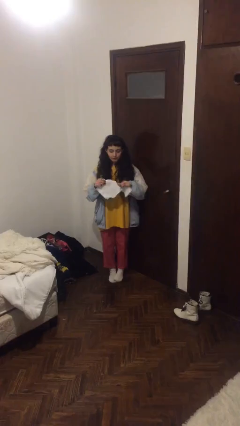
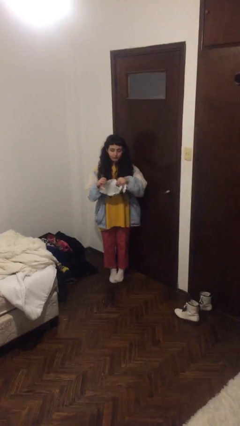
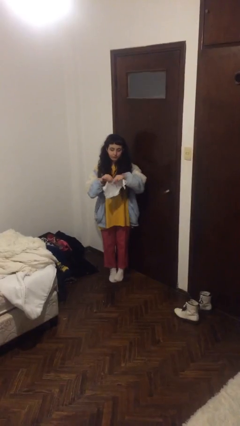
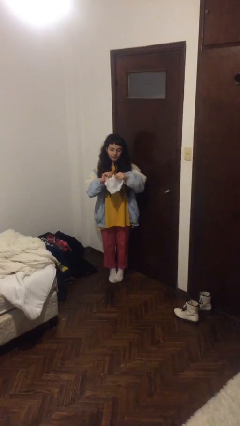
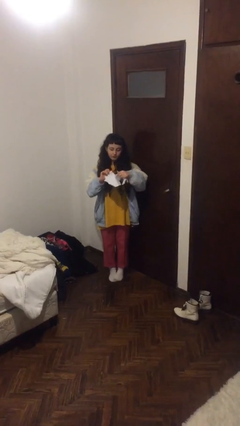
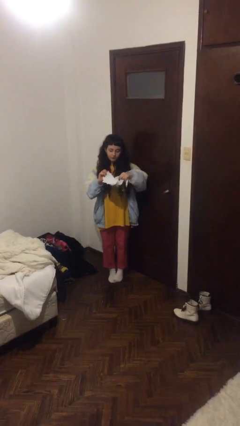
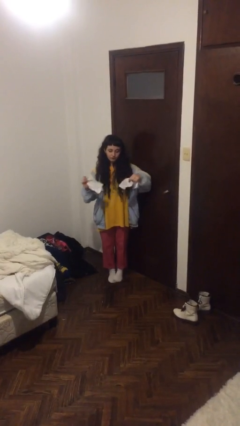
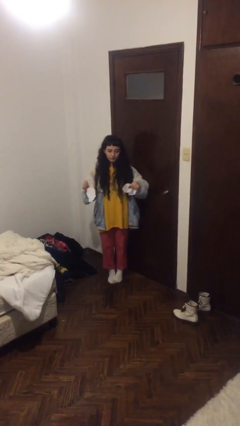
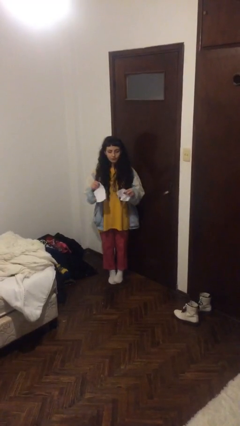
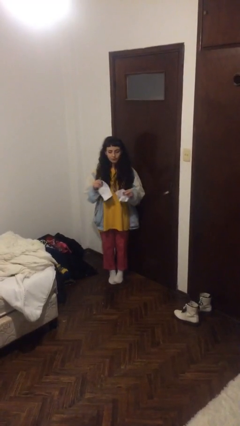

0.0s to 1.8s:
person tears paper

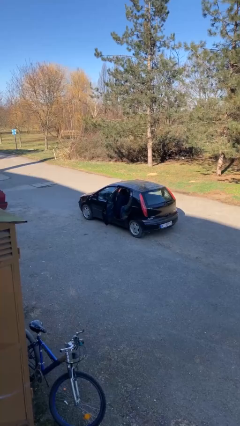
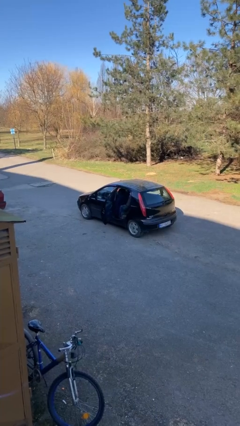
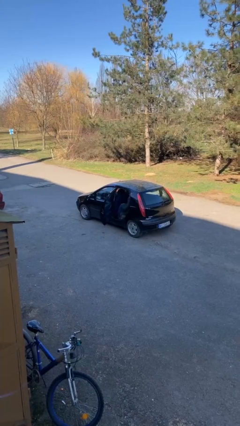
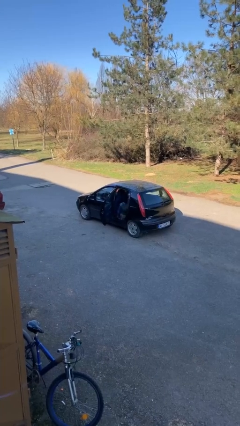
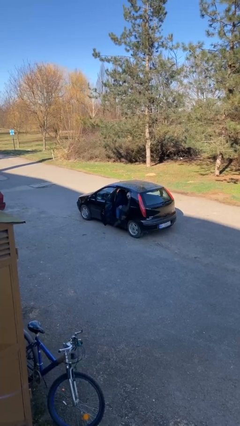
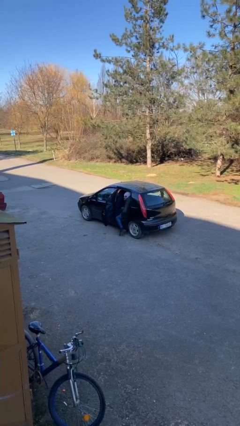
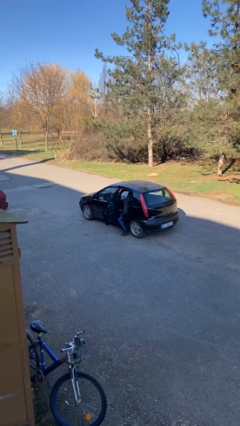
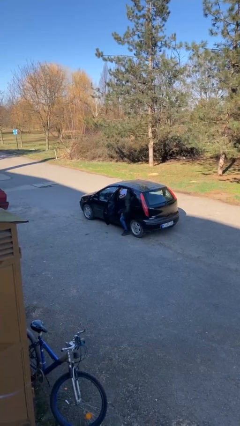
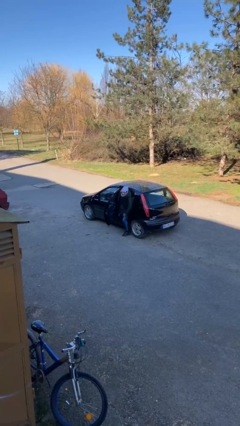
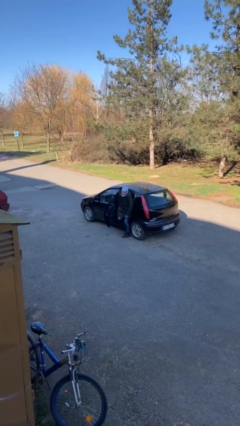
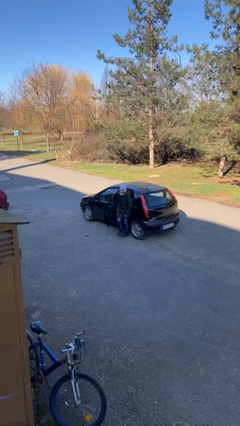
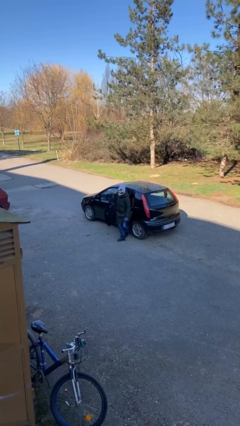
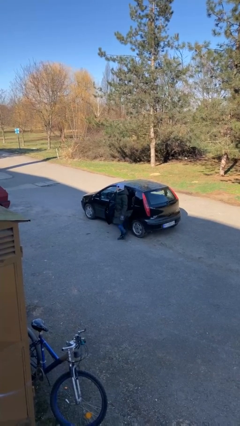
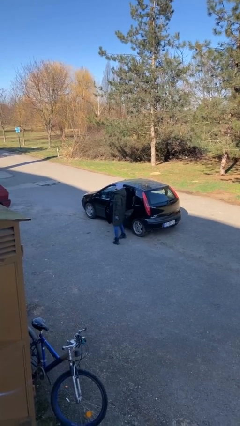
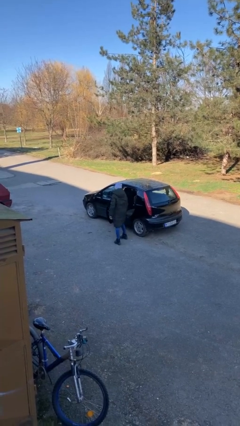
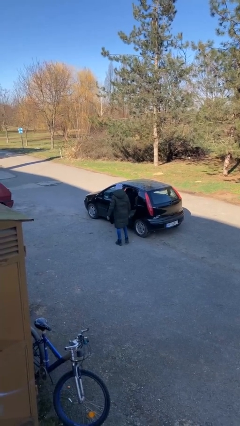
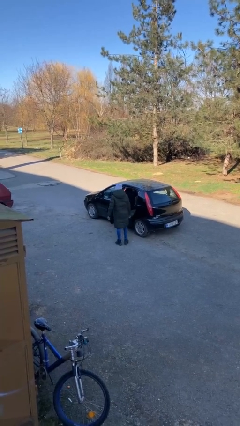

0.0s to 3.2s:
person exits car

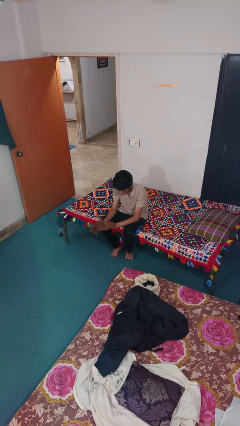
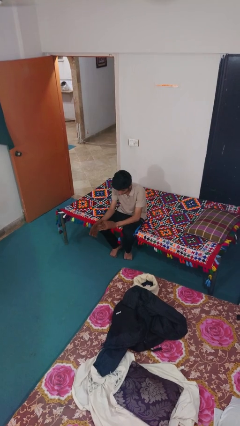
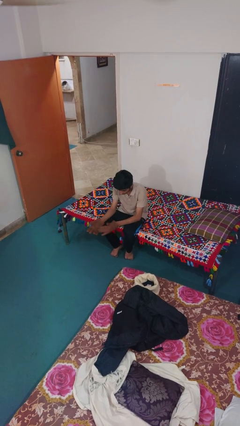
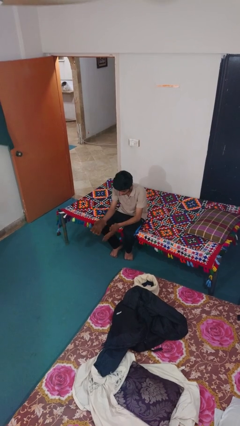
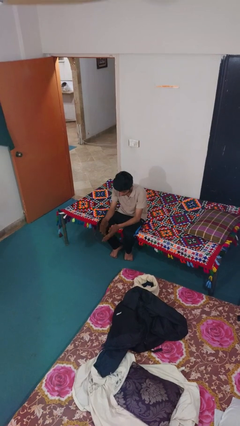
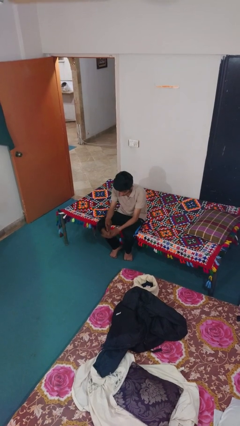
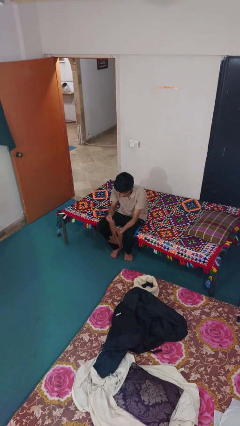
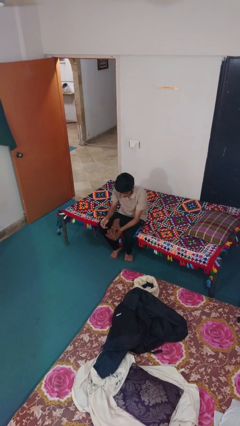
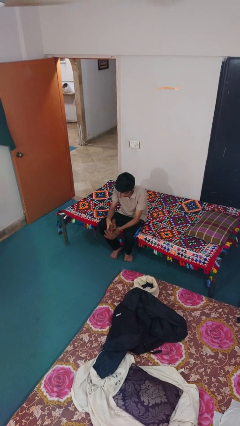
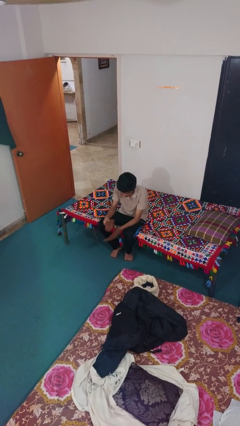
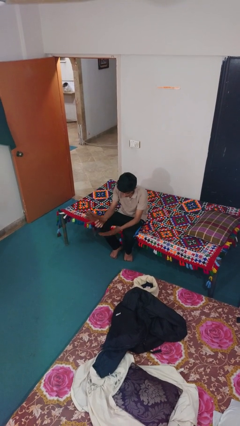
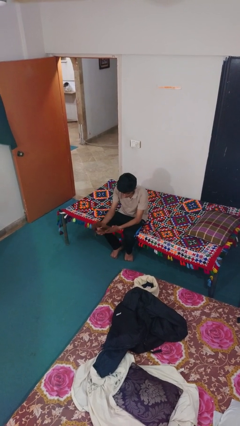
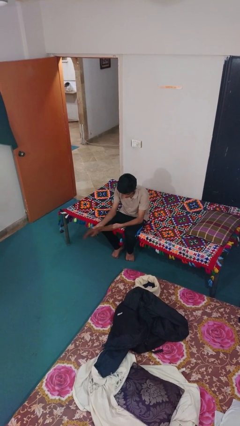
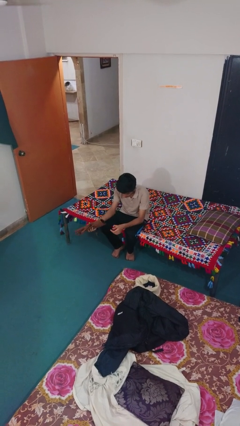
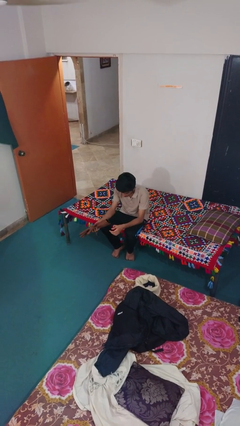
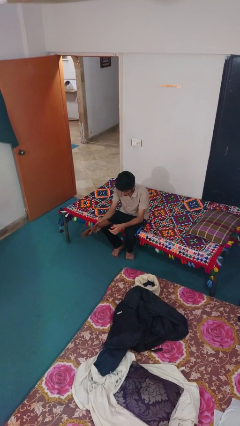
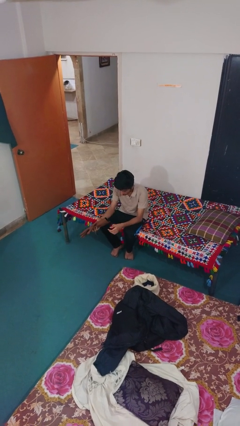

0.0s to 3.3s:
person takes off gloves

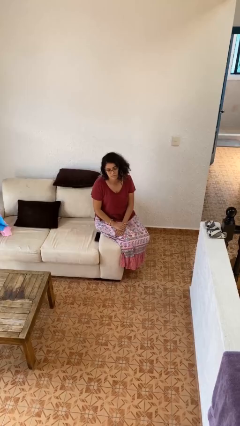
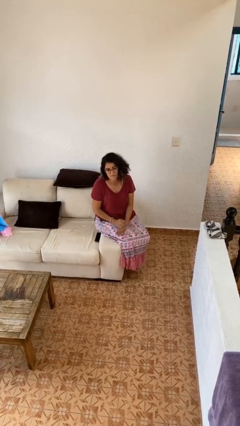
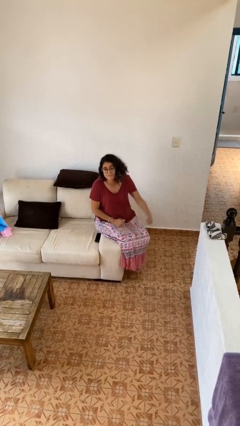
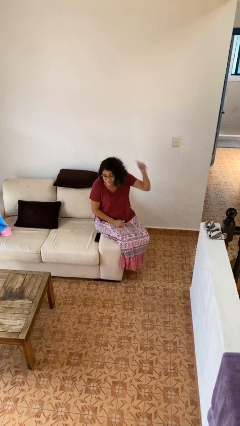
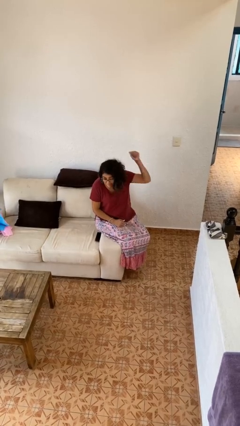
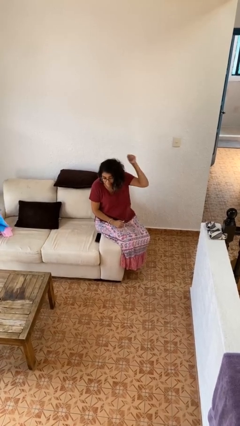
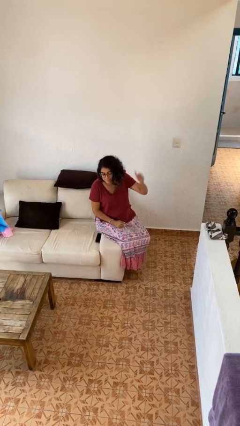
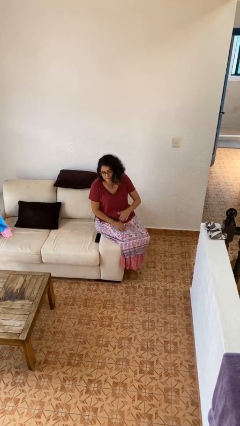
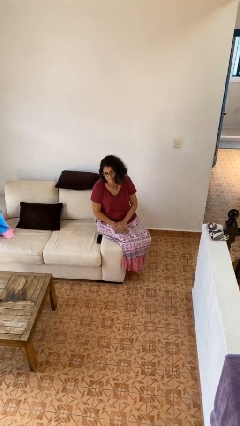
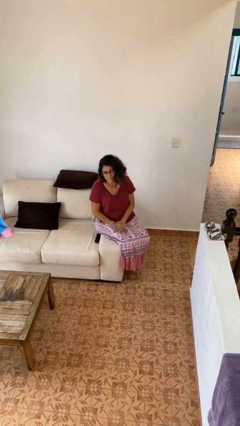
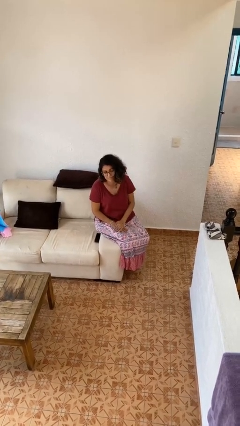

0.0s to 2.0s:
person gestures behind me

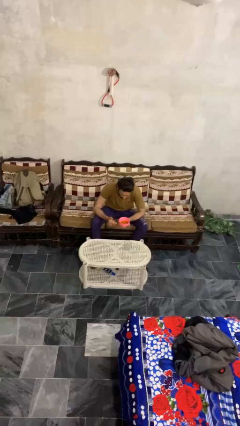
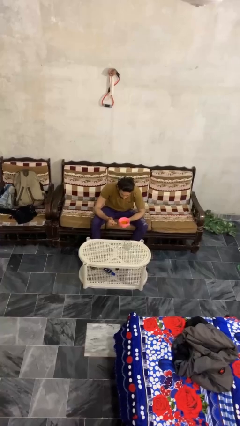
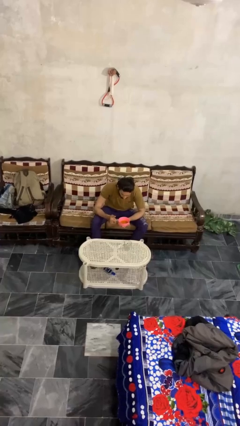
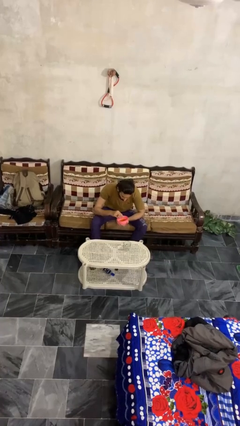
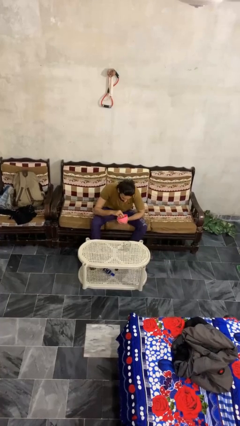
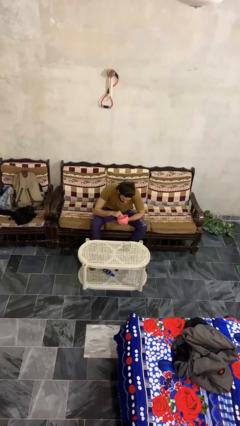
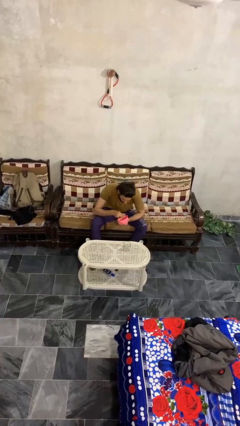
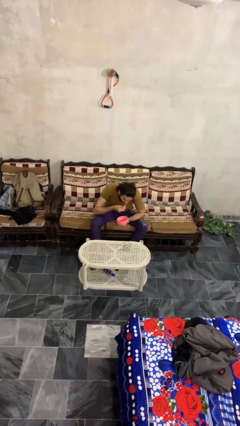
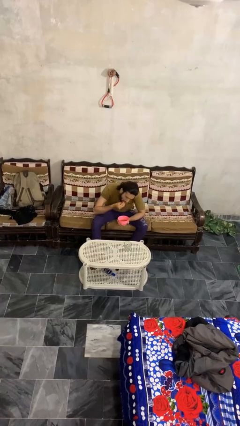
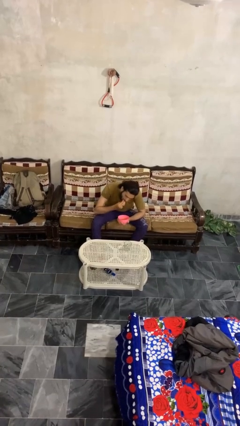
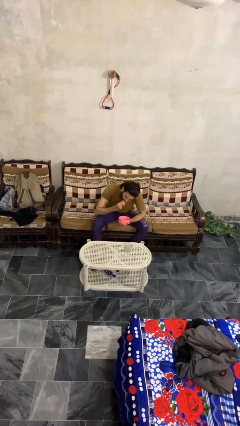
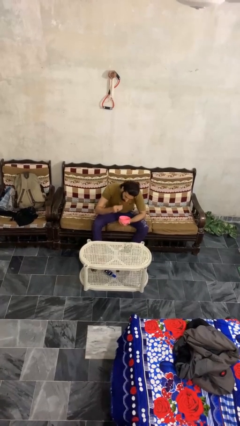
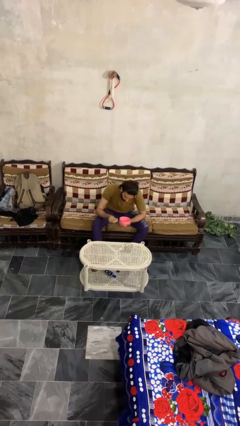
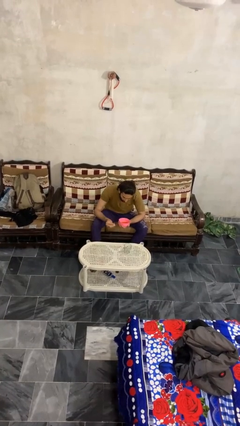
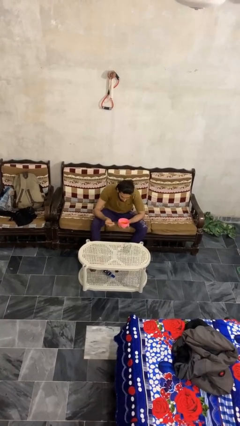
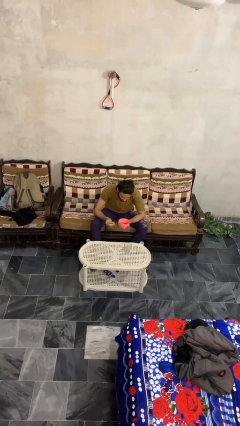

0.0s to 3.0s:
person eats with hands

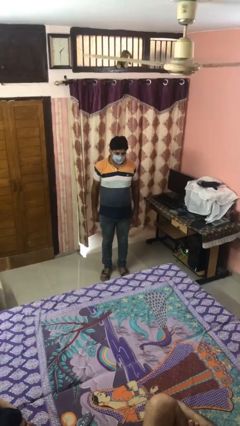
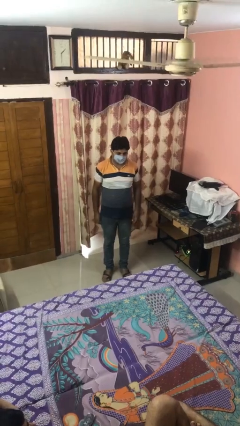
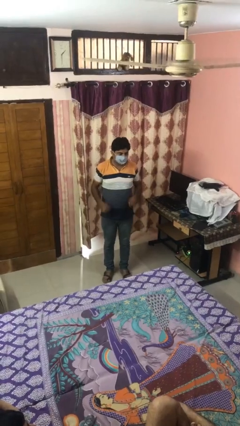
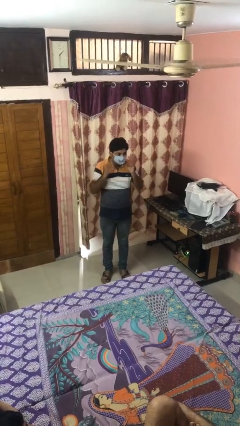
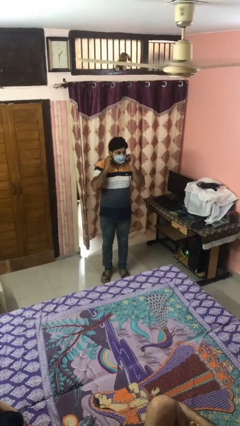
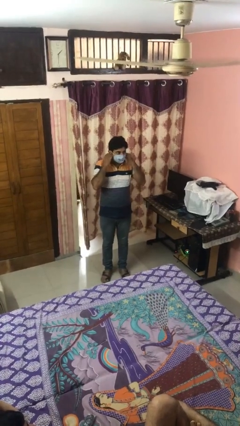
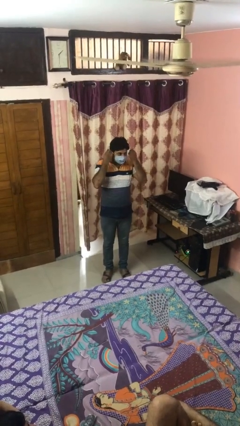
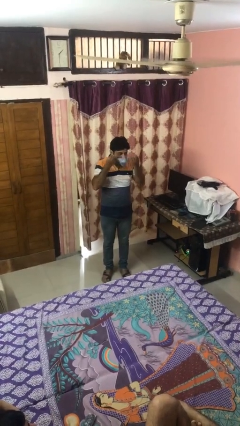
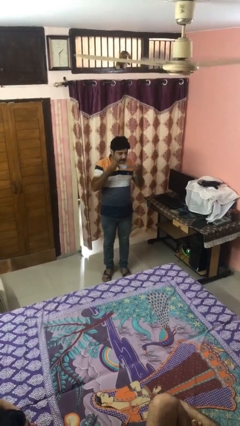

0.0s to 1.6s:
person takes off facemask

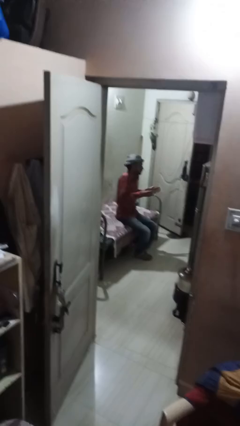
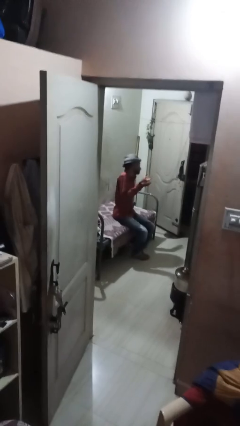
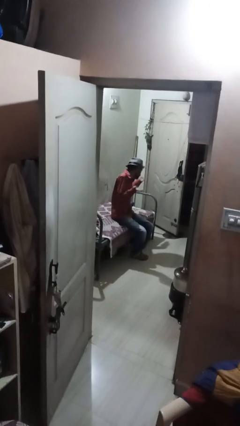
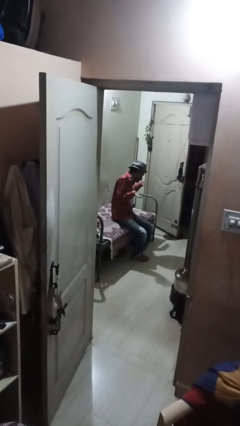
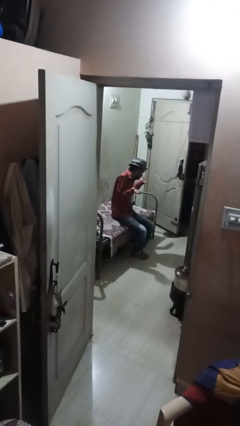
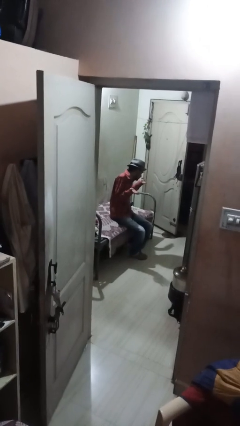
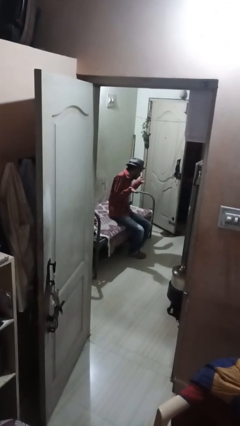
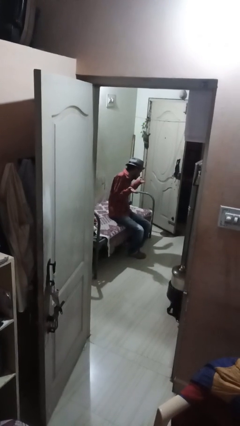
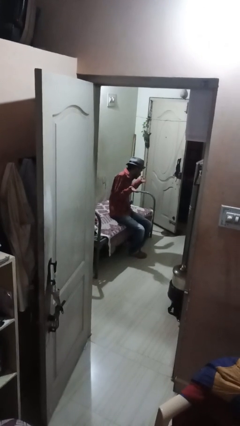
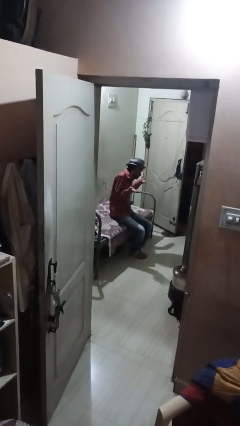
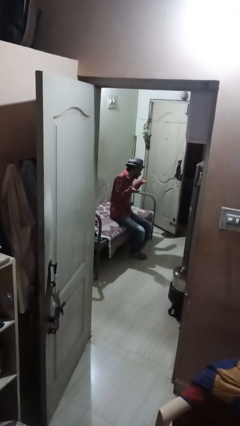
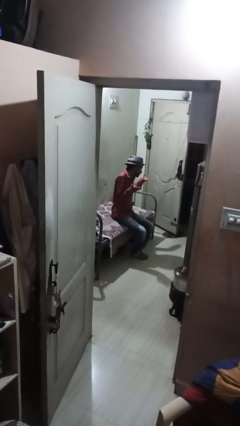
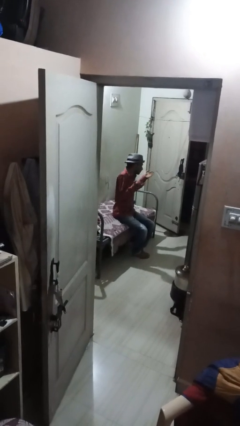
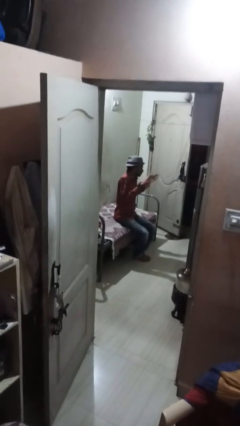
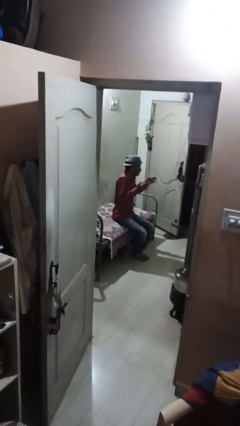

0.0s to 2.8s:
person shrugs
